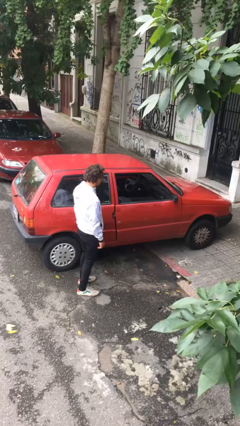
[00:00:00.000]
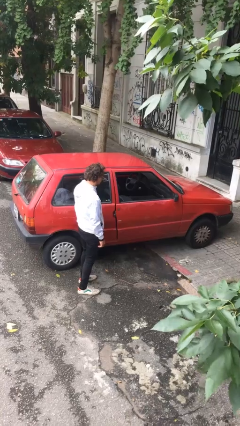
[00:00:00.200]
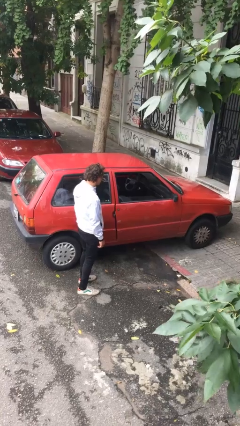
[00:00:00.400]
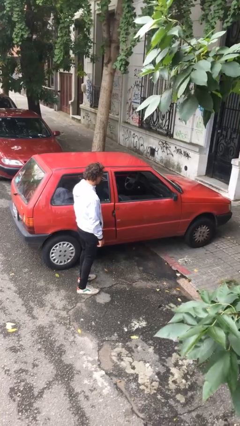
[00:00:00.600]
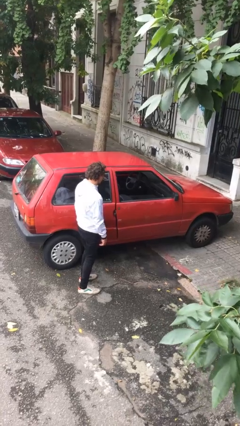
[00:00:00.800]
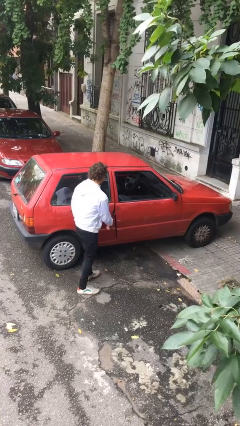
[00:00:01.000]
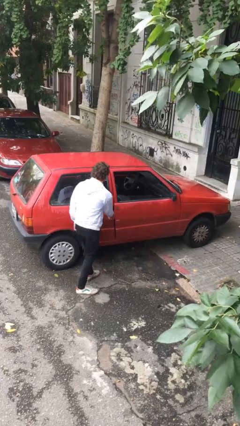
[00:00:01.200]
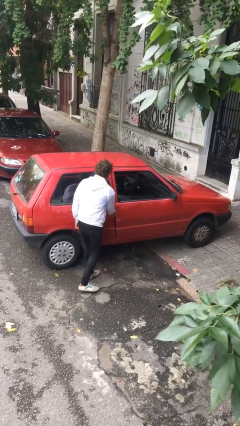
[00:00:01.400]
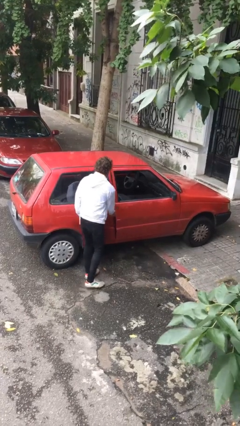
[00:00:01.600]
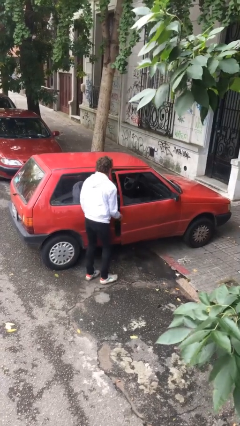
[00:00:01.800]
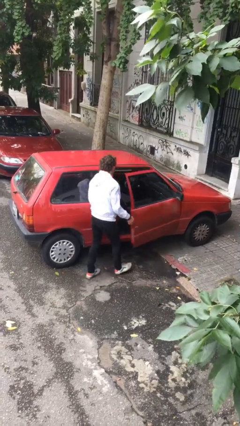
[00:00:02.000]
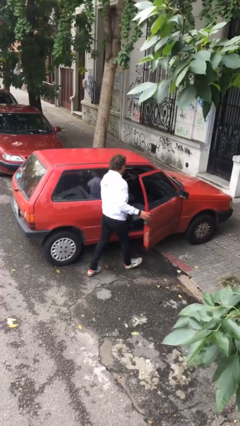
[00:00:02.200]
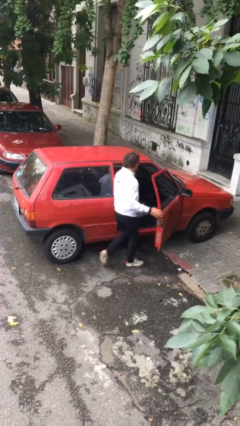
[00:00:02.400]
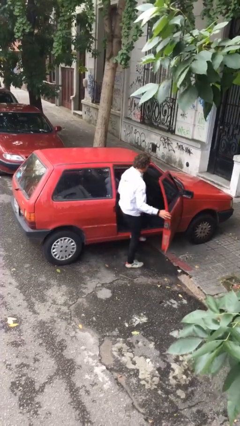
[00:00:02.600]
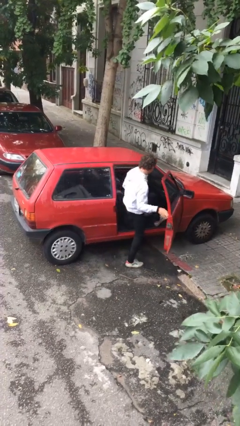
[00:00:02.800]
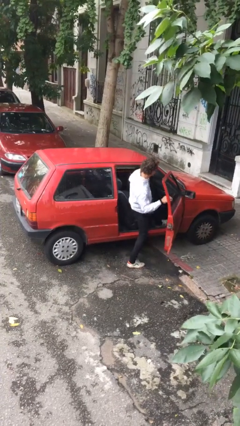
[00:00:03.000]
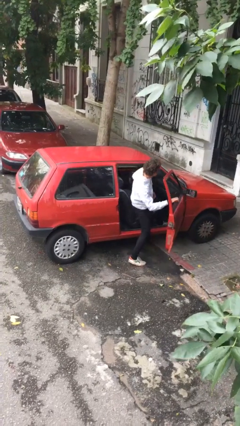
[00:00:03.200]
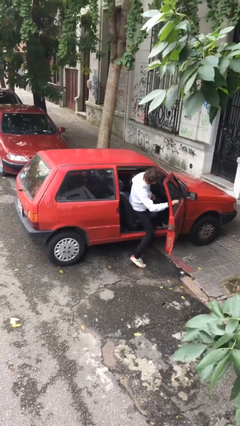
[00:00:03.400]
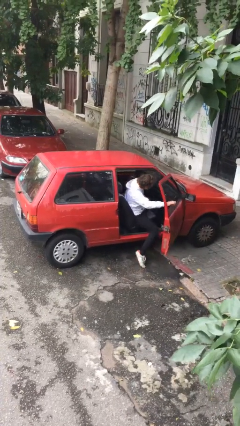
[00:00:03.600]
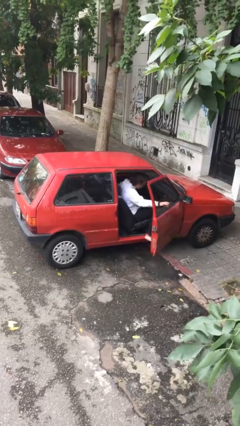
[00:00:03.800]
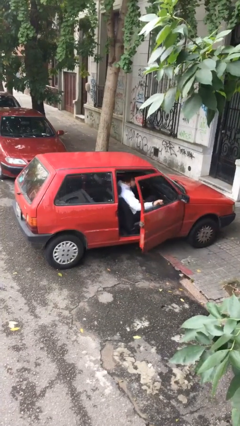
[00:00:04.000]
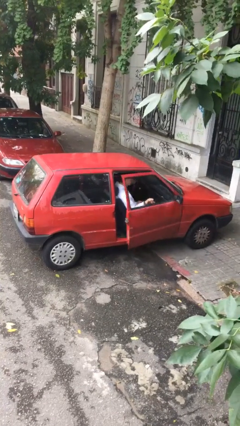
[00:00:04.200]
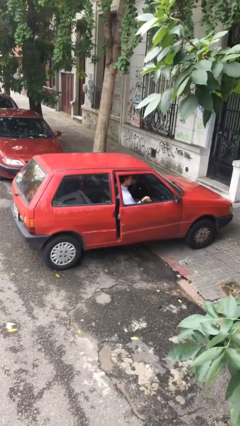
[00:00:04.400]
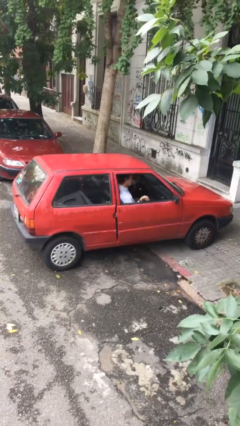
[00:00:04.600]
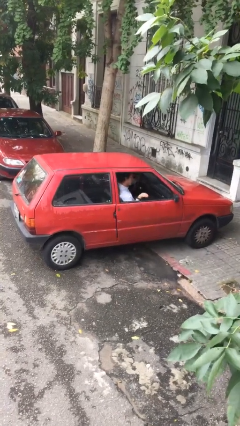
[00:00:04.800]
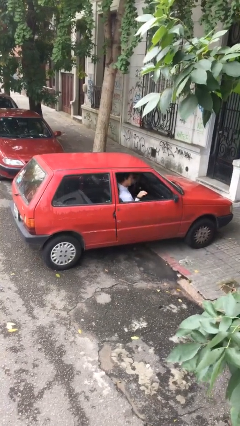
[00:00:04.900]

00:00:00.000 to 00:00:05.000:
car picks up person

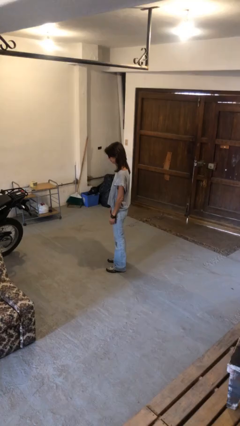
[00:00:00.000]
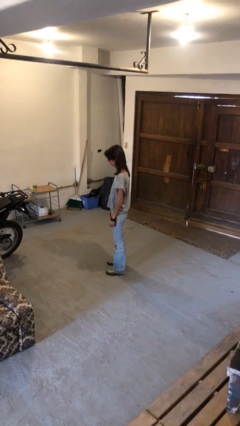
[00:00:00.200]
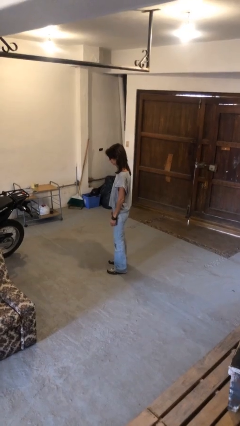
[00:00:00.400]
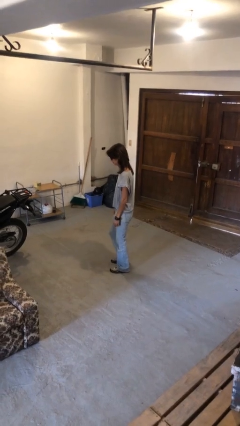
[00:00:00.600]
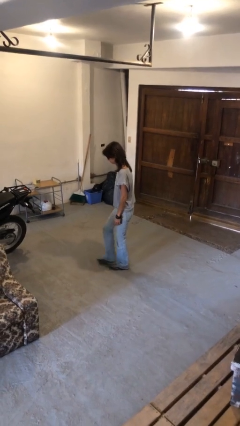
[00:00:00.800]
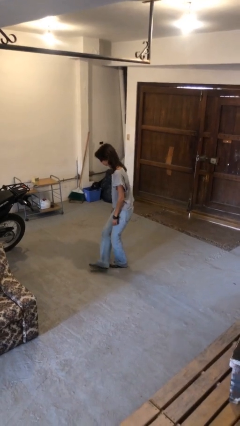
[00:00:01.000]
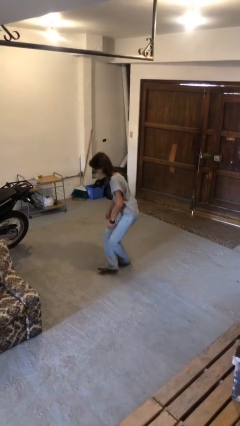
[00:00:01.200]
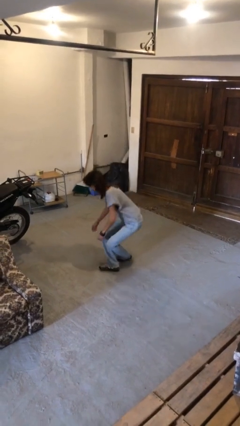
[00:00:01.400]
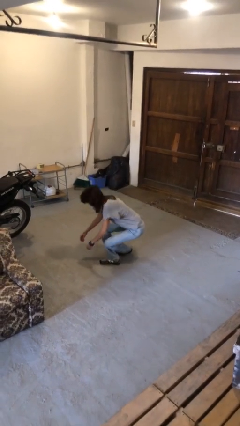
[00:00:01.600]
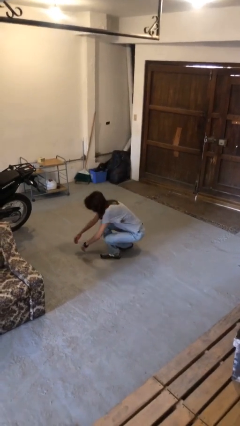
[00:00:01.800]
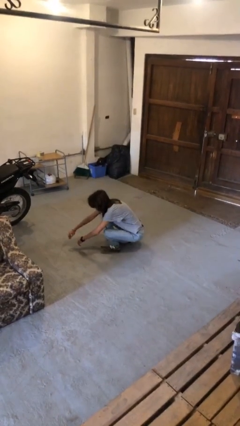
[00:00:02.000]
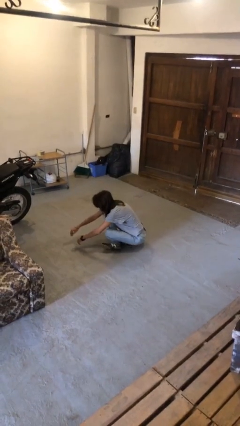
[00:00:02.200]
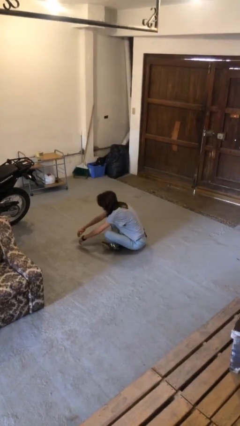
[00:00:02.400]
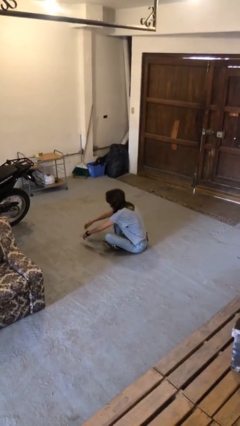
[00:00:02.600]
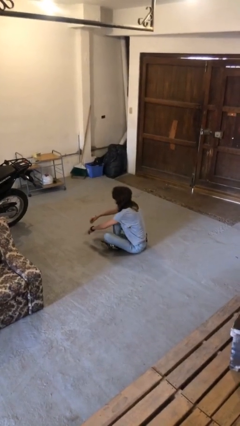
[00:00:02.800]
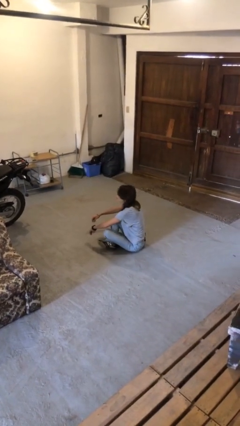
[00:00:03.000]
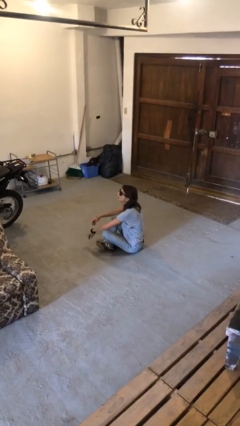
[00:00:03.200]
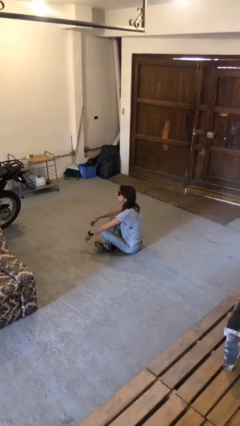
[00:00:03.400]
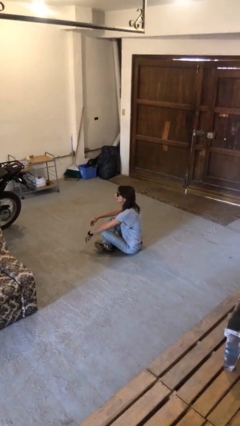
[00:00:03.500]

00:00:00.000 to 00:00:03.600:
person sits crisscross

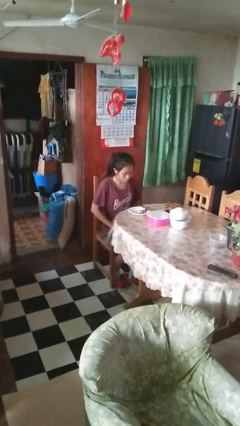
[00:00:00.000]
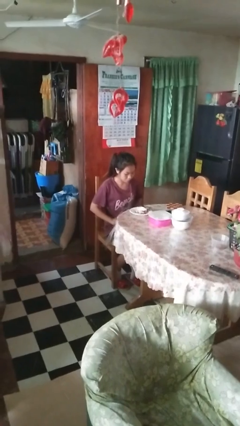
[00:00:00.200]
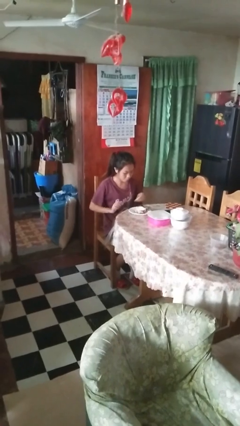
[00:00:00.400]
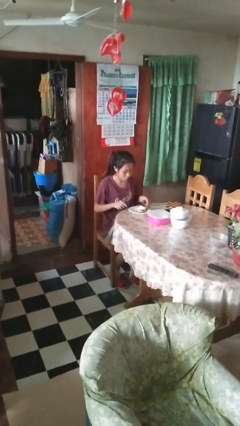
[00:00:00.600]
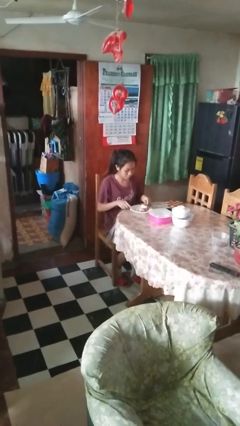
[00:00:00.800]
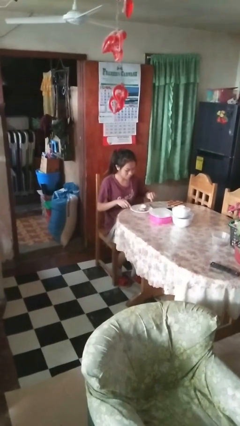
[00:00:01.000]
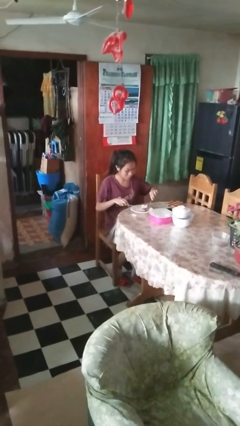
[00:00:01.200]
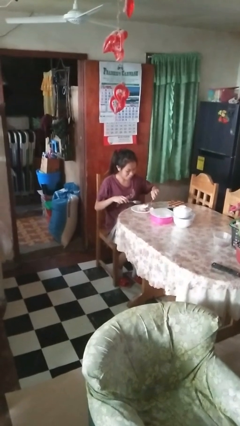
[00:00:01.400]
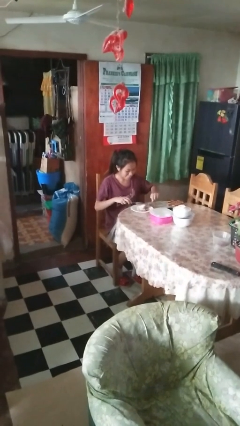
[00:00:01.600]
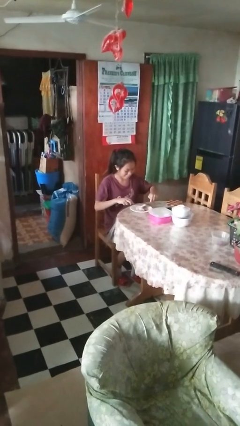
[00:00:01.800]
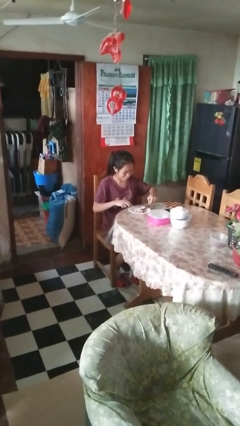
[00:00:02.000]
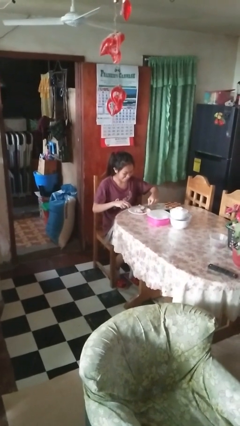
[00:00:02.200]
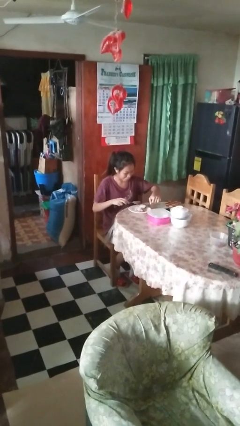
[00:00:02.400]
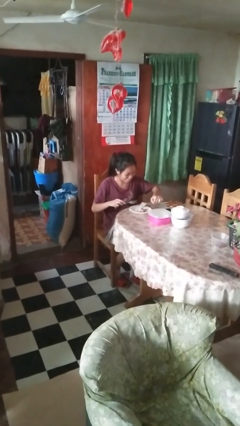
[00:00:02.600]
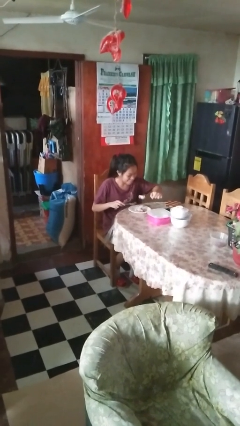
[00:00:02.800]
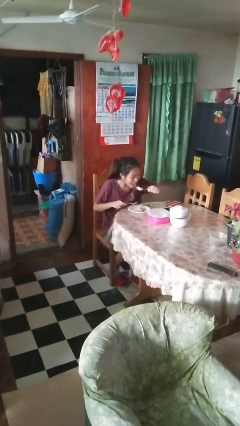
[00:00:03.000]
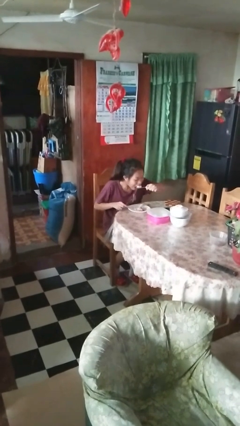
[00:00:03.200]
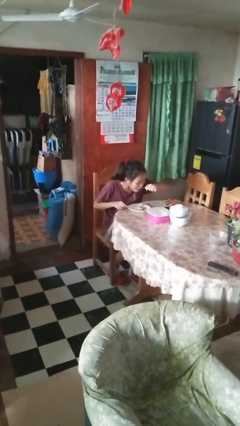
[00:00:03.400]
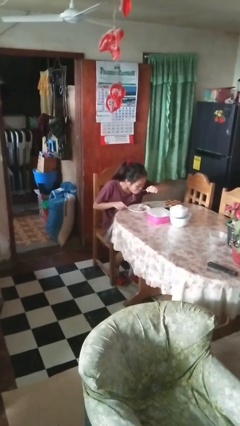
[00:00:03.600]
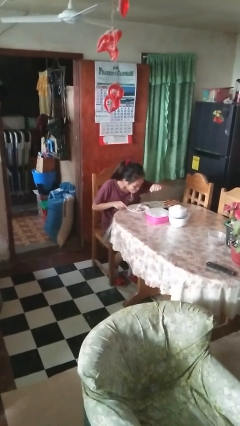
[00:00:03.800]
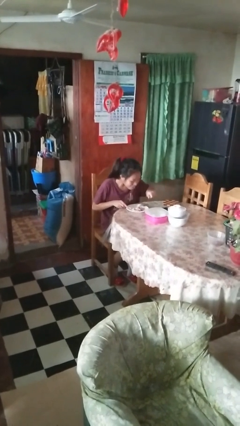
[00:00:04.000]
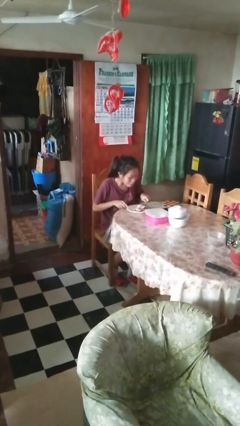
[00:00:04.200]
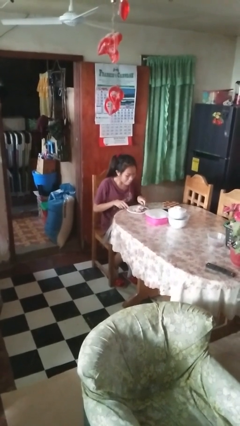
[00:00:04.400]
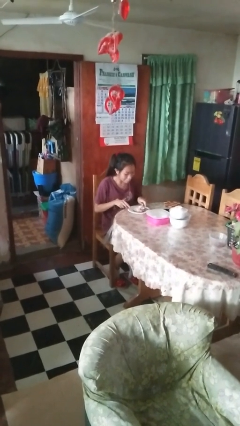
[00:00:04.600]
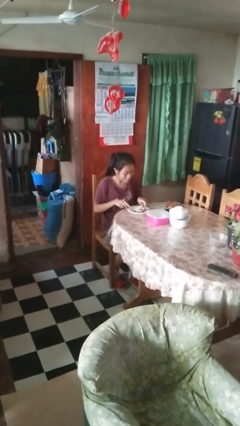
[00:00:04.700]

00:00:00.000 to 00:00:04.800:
person eats with utensil

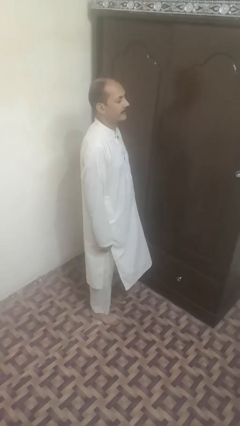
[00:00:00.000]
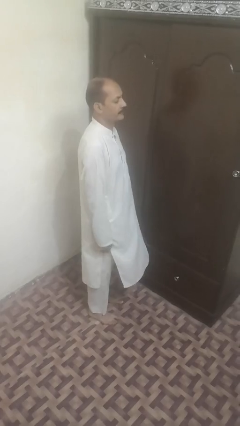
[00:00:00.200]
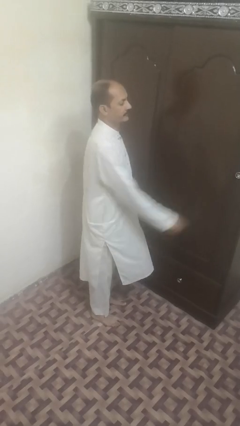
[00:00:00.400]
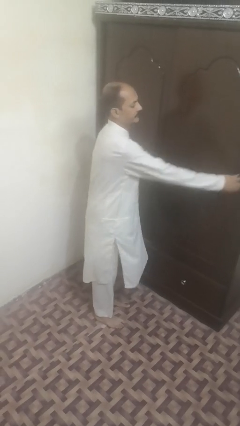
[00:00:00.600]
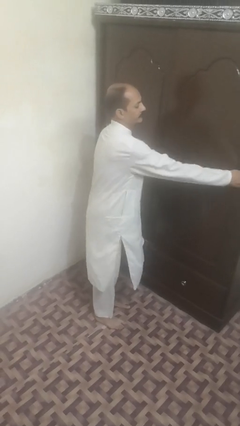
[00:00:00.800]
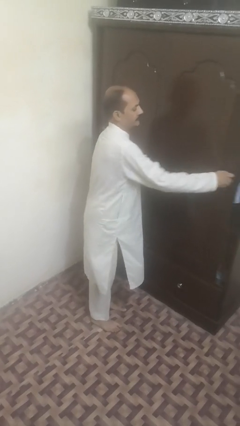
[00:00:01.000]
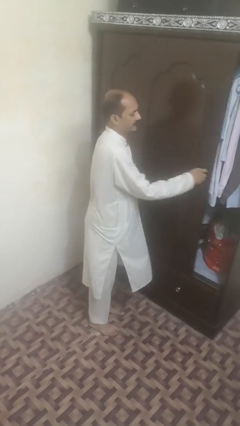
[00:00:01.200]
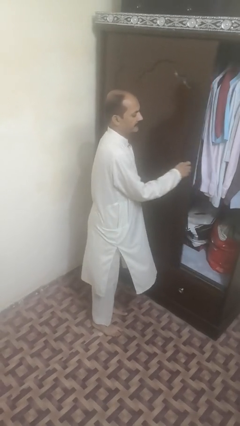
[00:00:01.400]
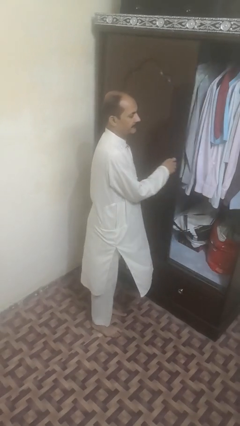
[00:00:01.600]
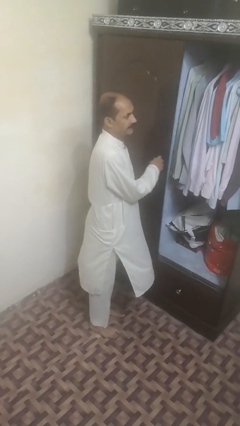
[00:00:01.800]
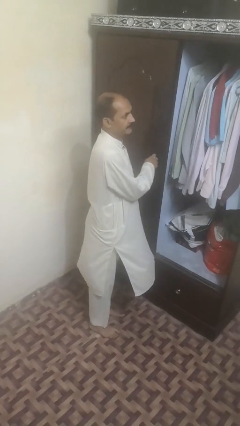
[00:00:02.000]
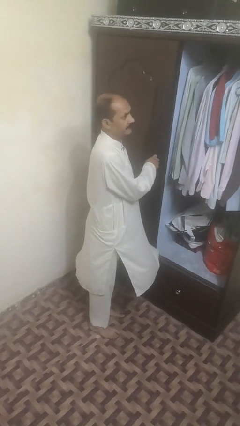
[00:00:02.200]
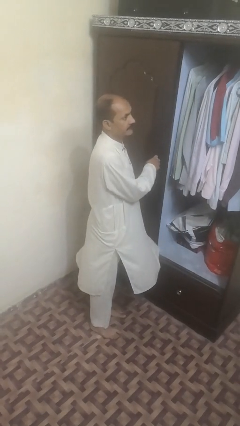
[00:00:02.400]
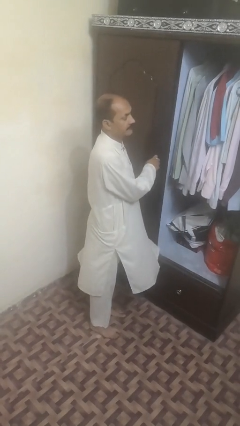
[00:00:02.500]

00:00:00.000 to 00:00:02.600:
person opens sliding door

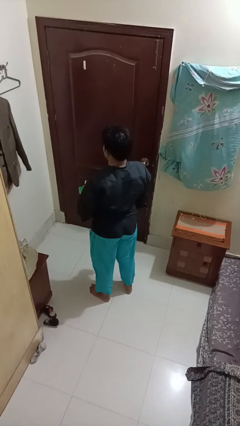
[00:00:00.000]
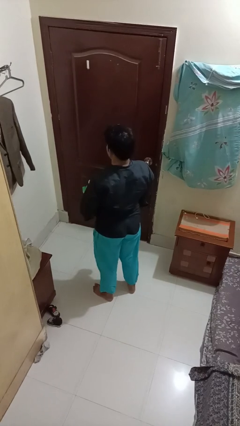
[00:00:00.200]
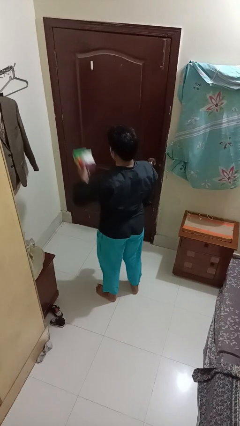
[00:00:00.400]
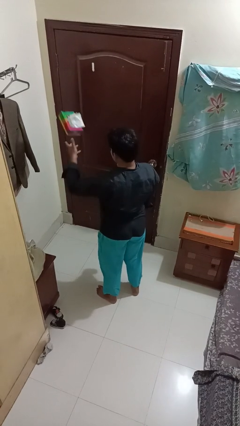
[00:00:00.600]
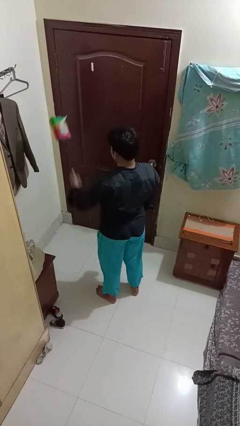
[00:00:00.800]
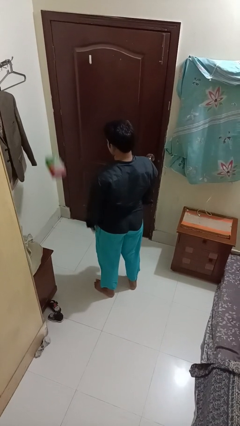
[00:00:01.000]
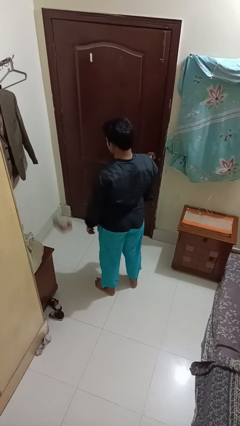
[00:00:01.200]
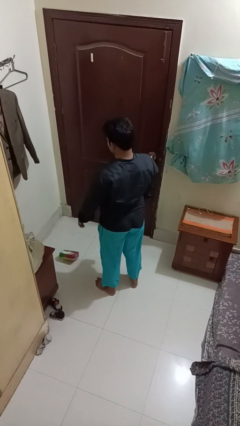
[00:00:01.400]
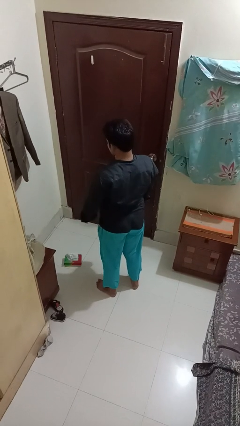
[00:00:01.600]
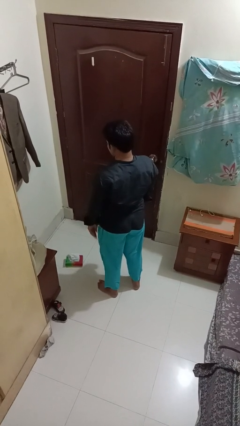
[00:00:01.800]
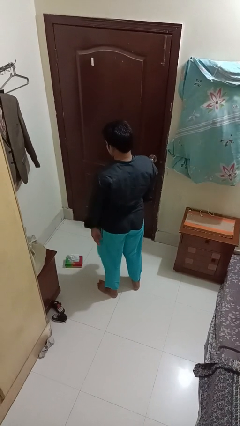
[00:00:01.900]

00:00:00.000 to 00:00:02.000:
person throws object into air
